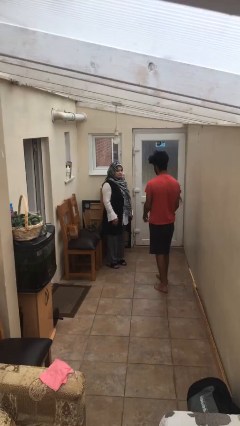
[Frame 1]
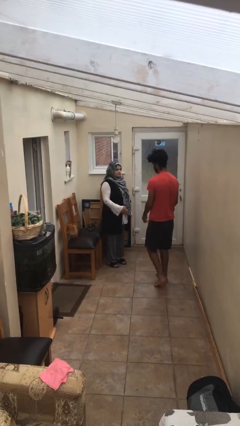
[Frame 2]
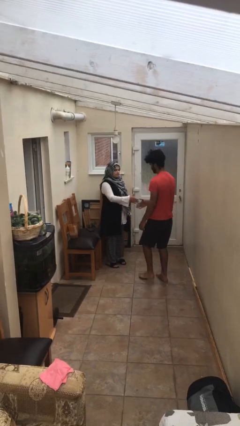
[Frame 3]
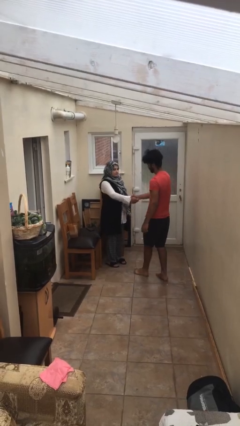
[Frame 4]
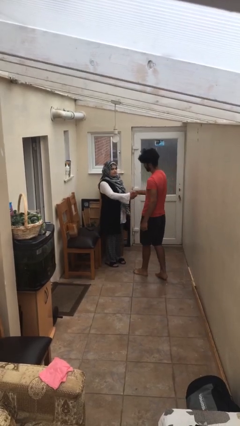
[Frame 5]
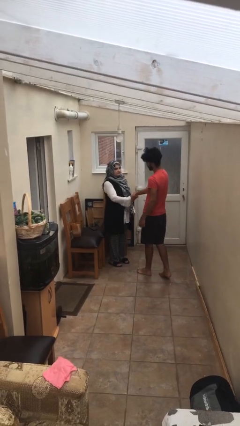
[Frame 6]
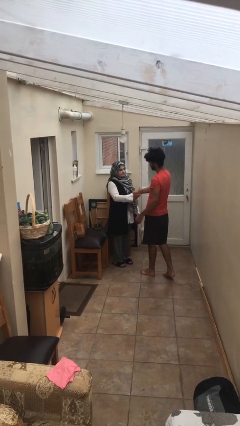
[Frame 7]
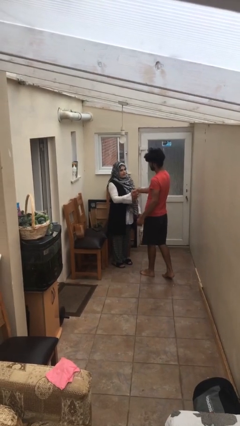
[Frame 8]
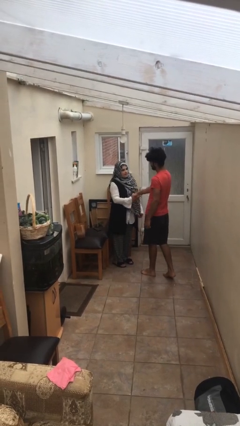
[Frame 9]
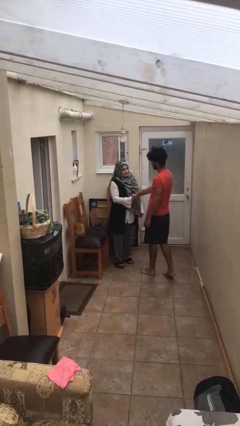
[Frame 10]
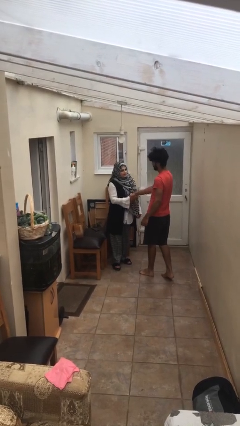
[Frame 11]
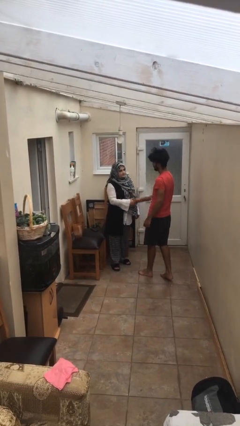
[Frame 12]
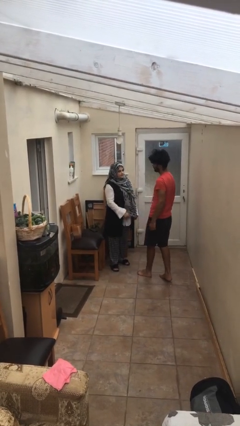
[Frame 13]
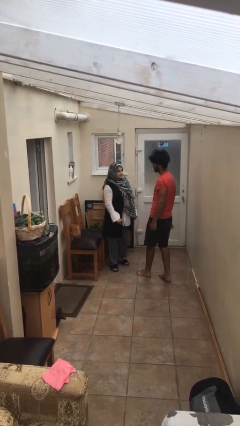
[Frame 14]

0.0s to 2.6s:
person shakes hand

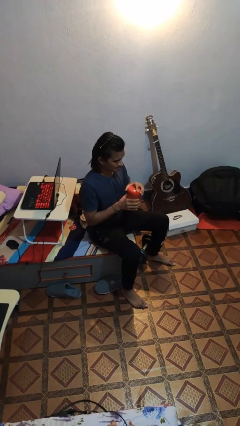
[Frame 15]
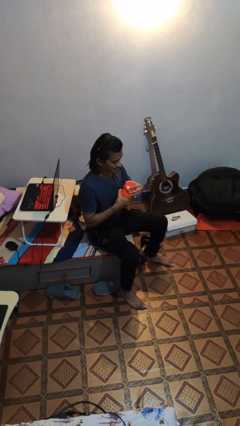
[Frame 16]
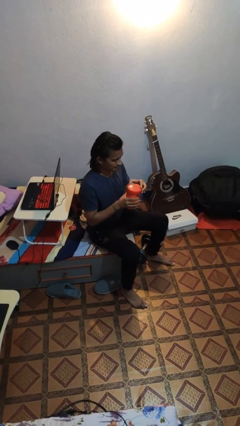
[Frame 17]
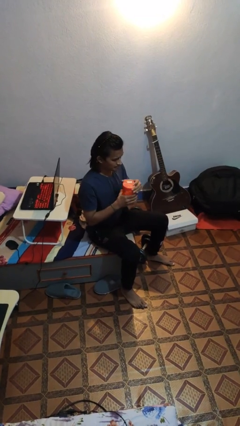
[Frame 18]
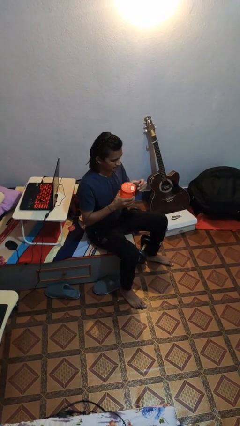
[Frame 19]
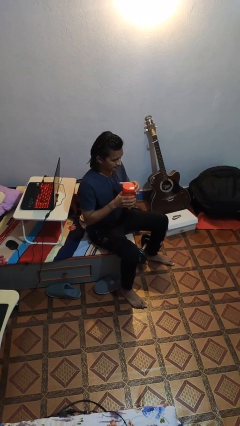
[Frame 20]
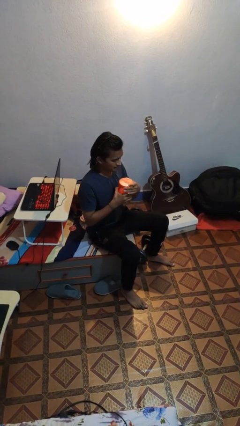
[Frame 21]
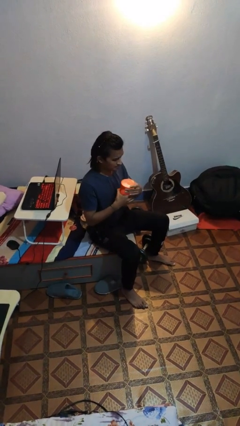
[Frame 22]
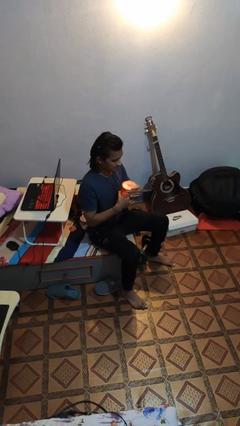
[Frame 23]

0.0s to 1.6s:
person closes jar

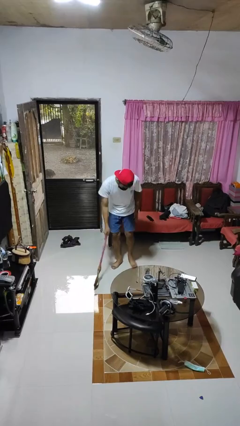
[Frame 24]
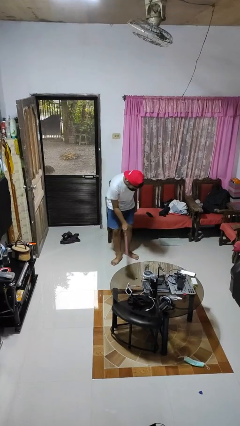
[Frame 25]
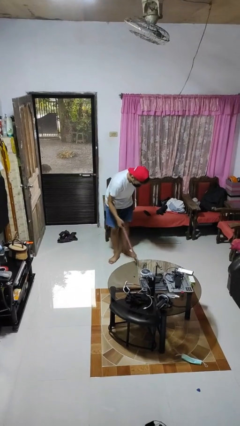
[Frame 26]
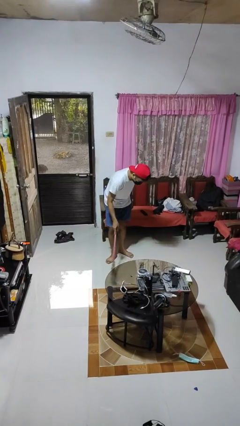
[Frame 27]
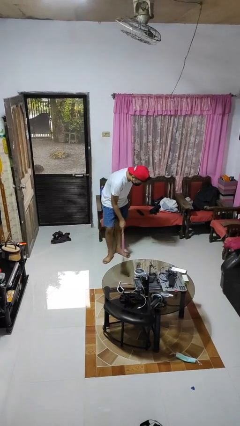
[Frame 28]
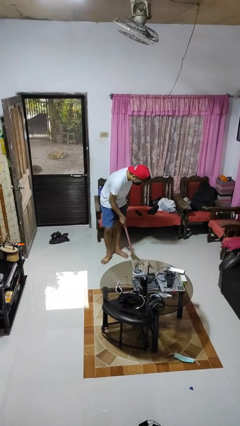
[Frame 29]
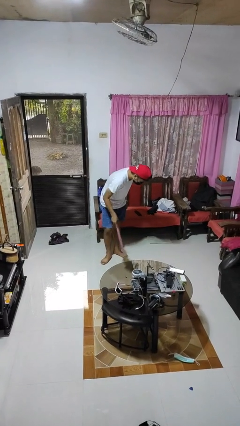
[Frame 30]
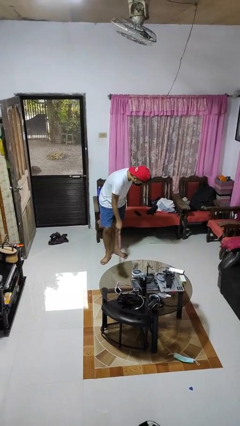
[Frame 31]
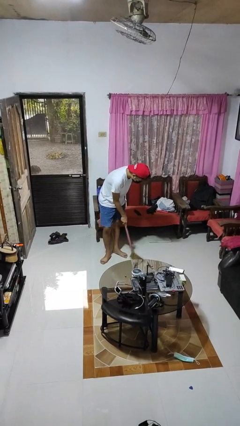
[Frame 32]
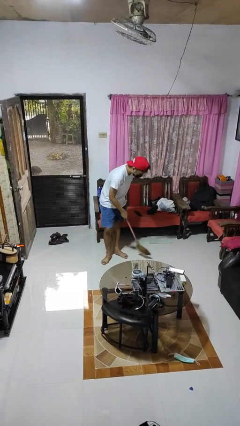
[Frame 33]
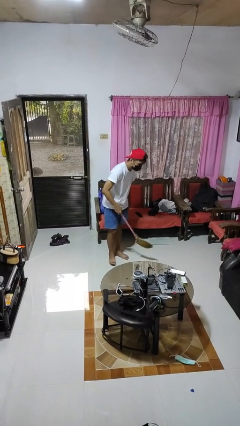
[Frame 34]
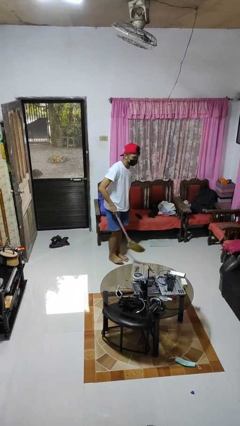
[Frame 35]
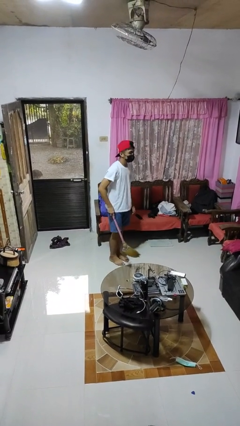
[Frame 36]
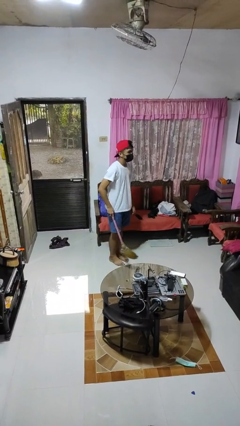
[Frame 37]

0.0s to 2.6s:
person sweeps floor

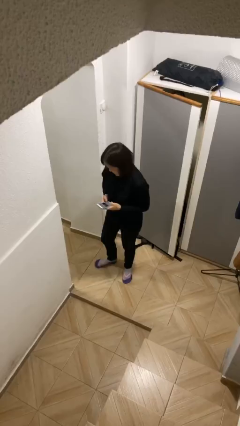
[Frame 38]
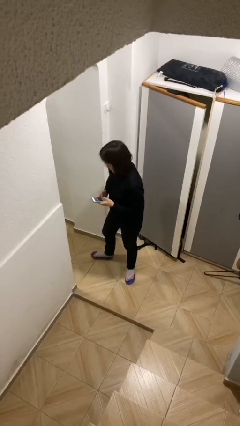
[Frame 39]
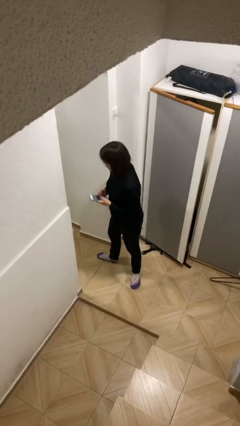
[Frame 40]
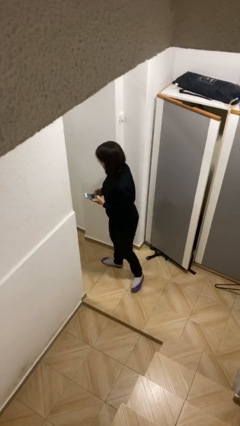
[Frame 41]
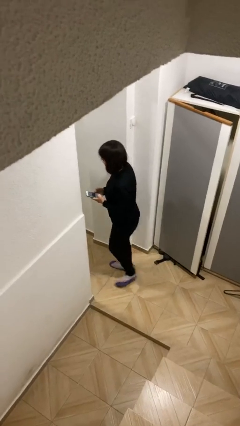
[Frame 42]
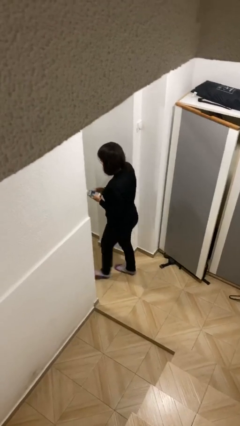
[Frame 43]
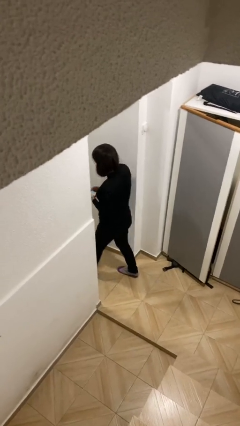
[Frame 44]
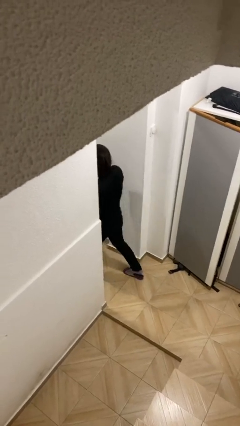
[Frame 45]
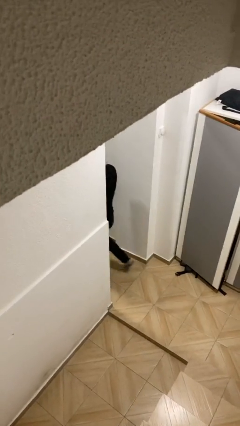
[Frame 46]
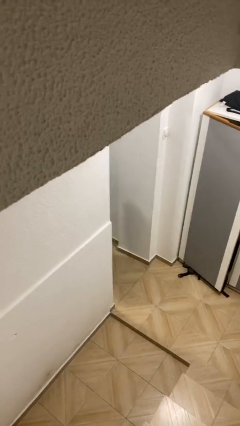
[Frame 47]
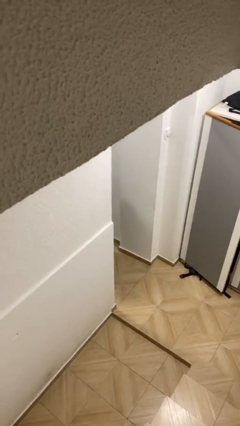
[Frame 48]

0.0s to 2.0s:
person exits scene through structure

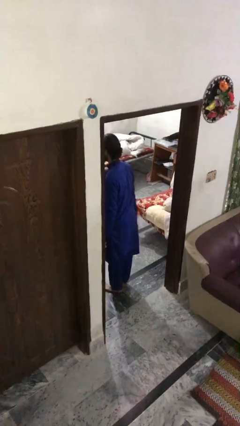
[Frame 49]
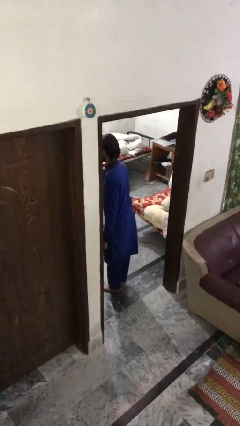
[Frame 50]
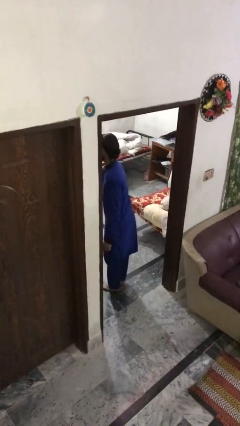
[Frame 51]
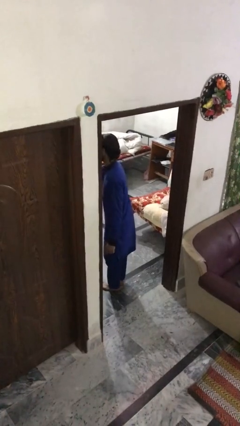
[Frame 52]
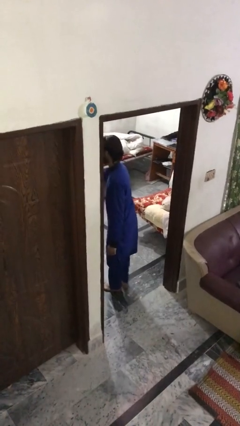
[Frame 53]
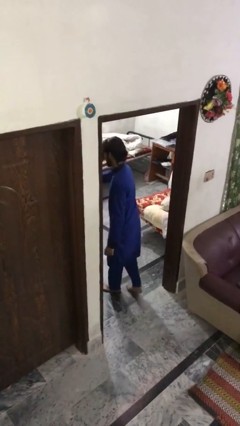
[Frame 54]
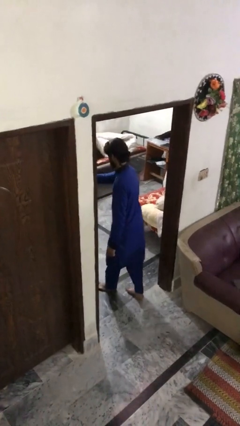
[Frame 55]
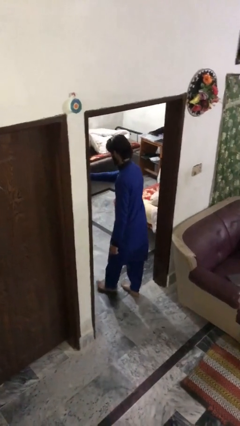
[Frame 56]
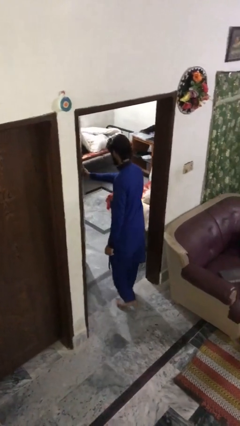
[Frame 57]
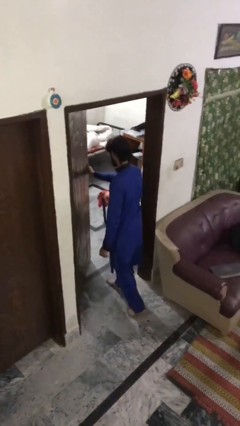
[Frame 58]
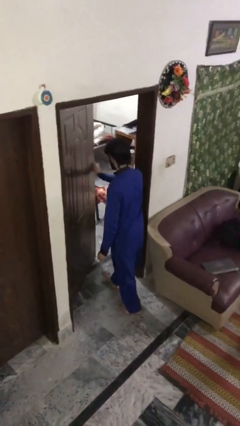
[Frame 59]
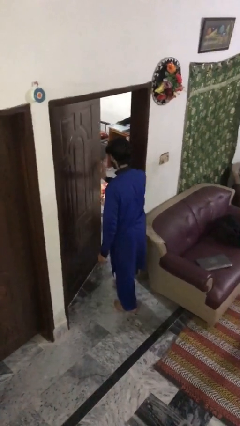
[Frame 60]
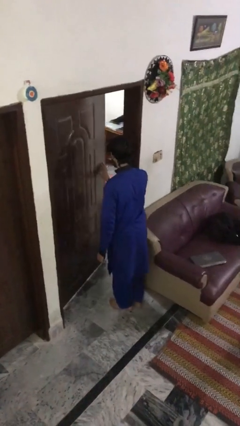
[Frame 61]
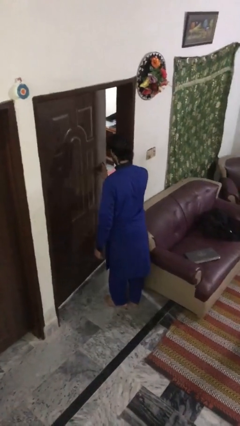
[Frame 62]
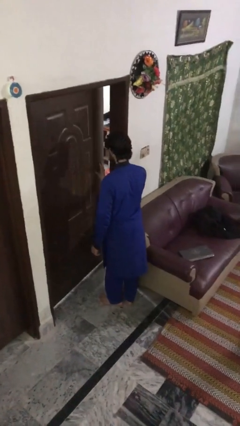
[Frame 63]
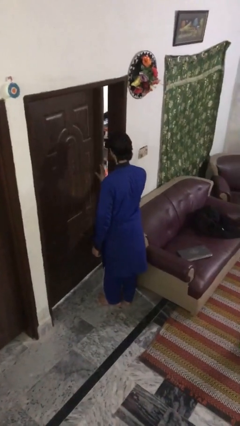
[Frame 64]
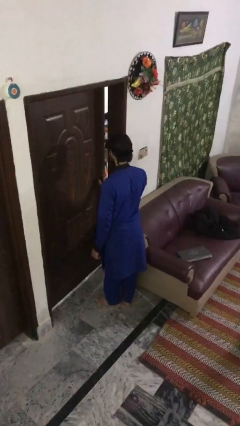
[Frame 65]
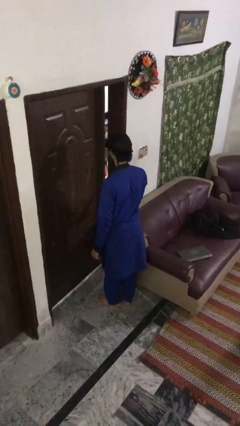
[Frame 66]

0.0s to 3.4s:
person closes facility door

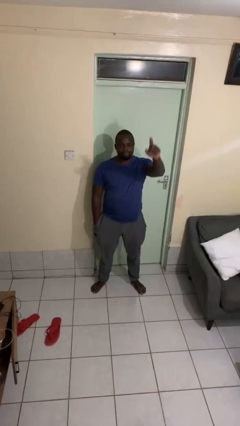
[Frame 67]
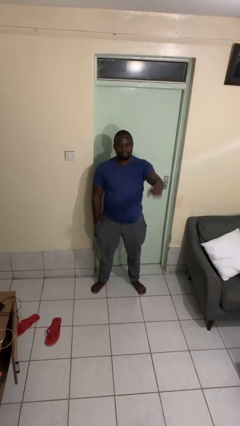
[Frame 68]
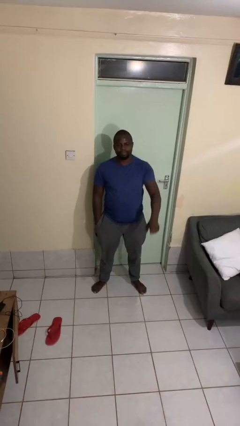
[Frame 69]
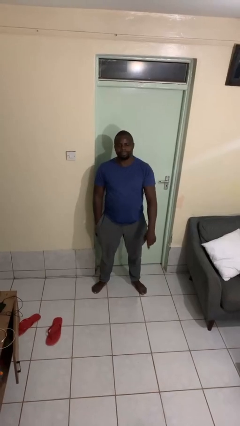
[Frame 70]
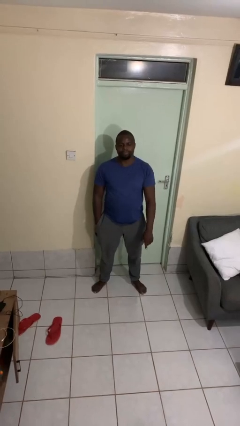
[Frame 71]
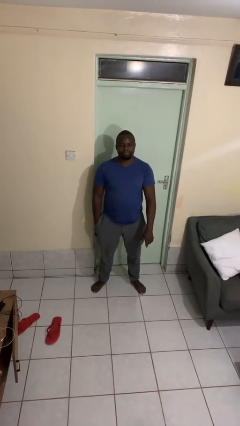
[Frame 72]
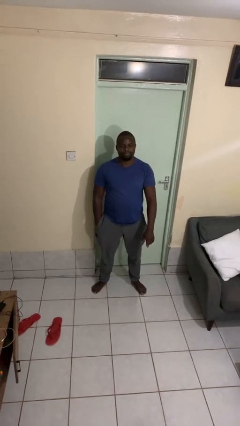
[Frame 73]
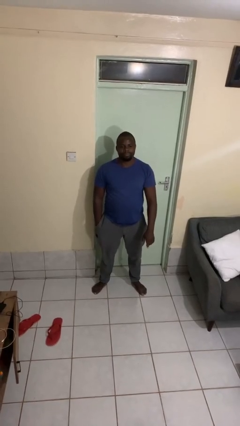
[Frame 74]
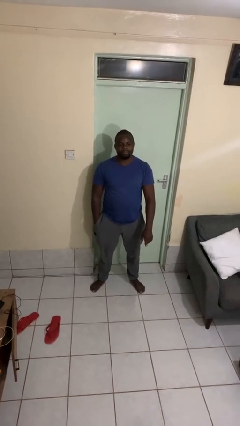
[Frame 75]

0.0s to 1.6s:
person gestures swipe down

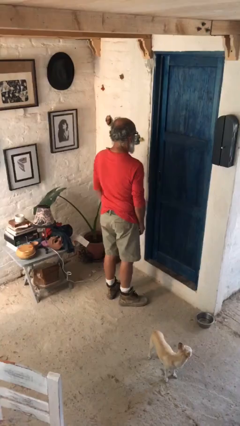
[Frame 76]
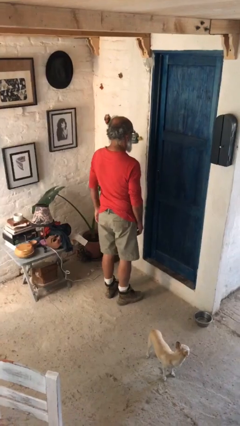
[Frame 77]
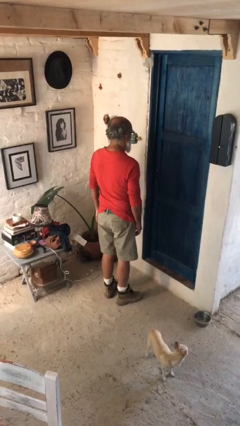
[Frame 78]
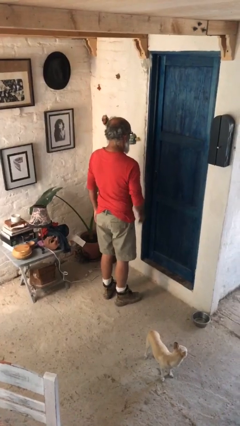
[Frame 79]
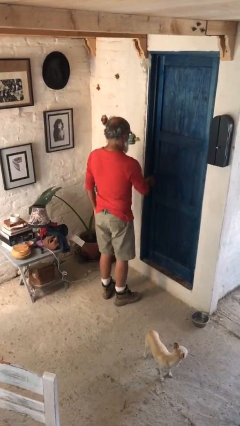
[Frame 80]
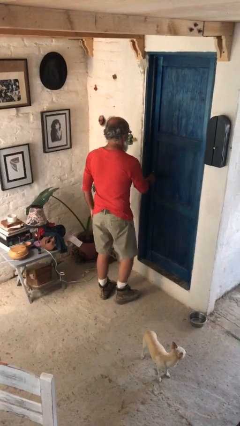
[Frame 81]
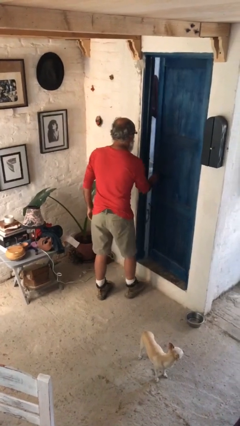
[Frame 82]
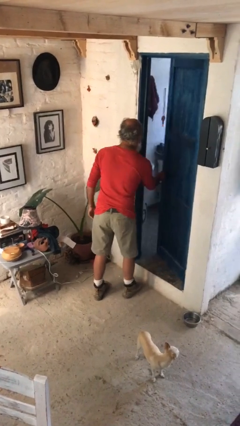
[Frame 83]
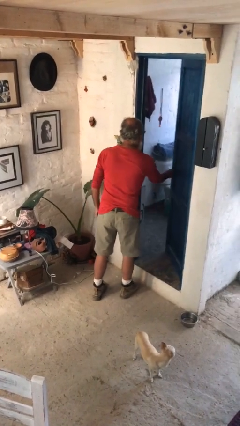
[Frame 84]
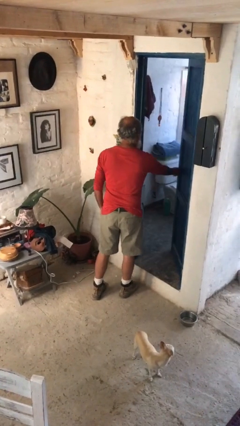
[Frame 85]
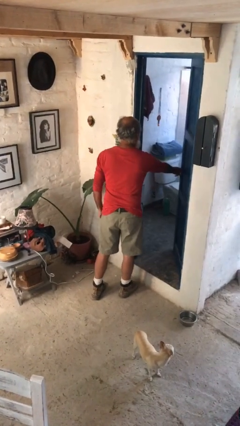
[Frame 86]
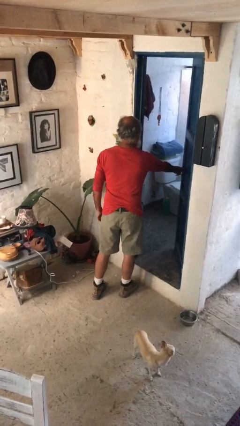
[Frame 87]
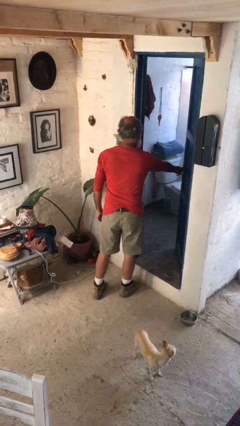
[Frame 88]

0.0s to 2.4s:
person opens facility door

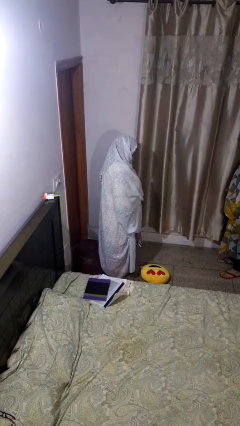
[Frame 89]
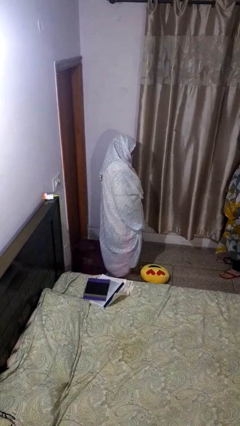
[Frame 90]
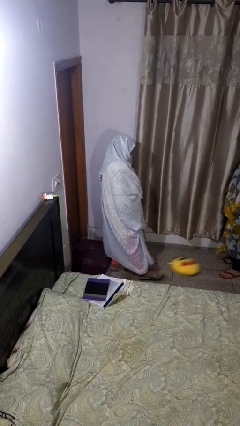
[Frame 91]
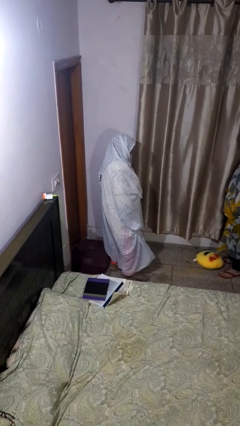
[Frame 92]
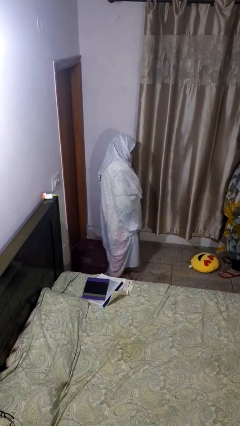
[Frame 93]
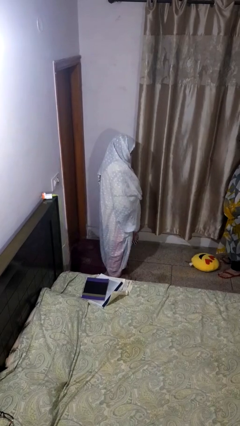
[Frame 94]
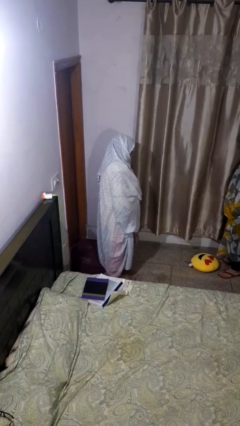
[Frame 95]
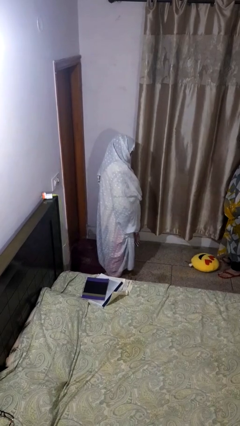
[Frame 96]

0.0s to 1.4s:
person kicks object to person
